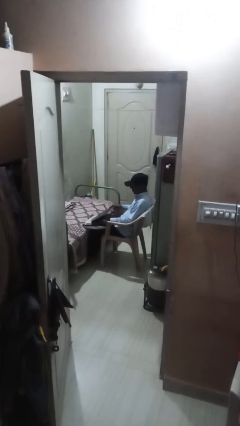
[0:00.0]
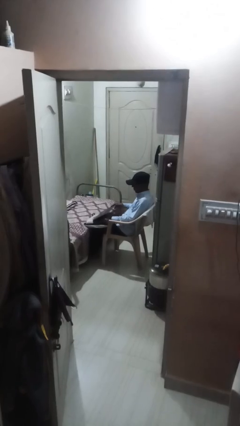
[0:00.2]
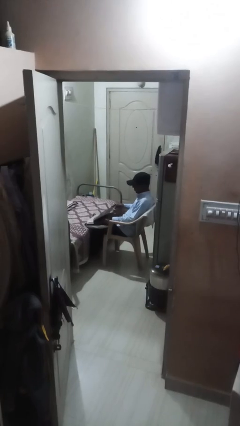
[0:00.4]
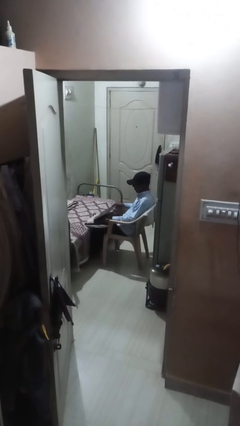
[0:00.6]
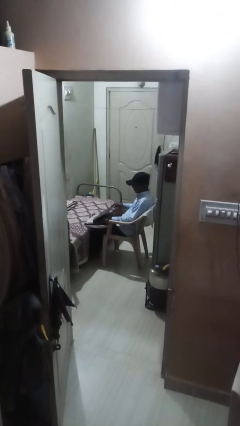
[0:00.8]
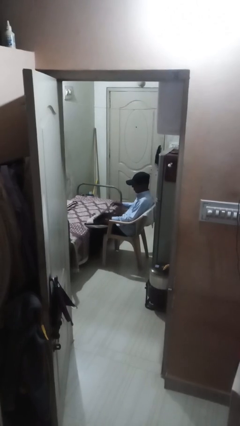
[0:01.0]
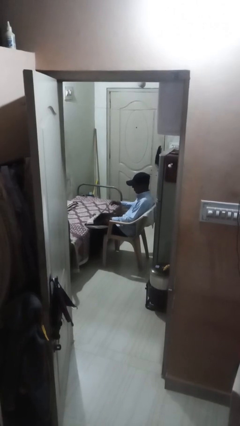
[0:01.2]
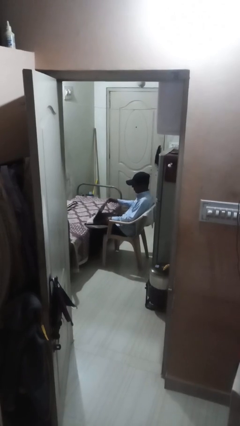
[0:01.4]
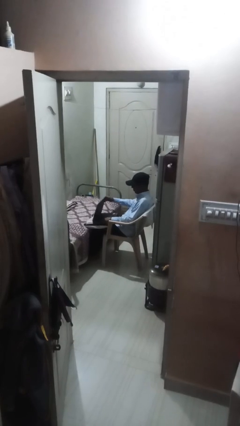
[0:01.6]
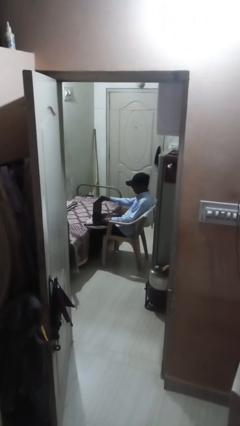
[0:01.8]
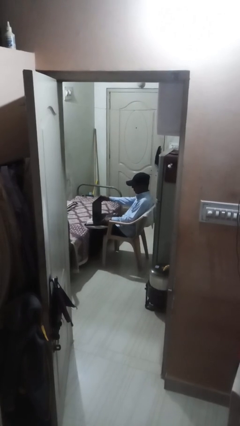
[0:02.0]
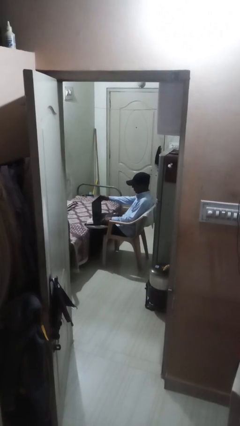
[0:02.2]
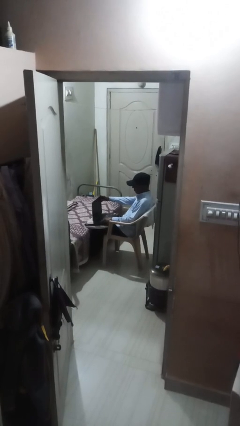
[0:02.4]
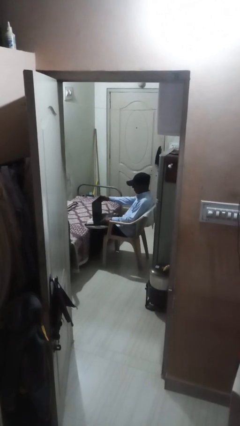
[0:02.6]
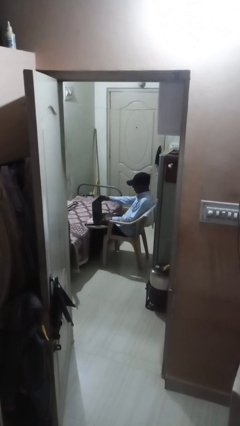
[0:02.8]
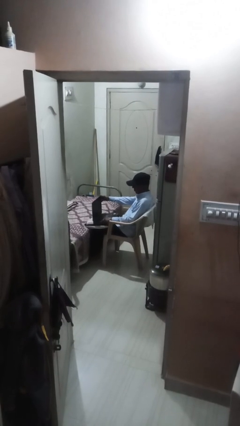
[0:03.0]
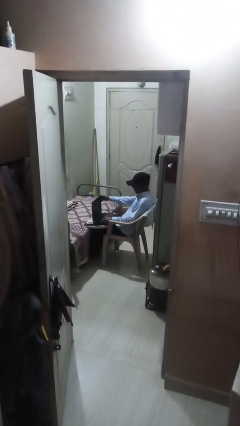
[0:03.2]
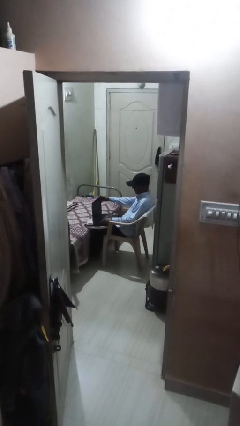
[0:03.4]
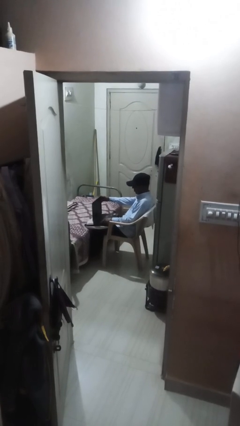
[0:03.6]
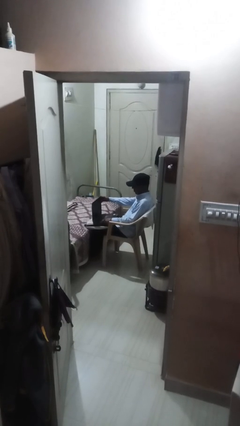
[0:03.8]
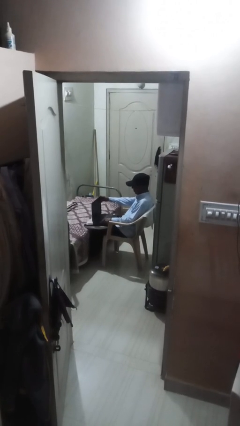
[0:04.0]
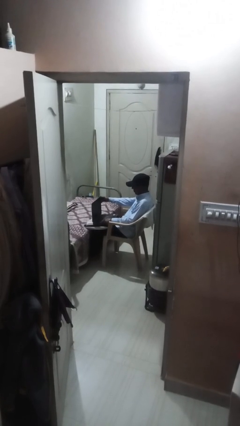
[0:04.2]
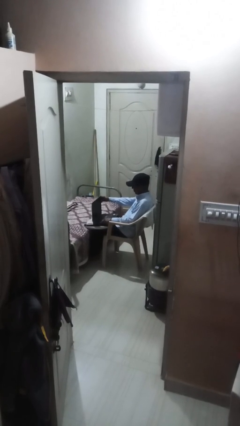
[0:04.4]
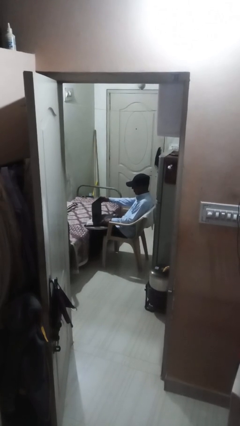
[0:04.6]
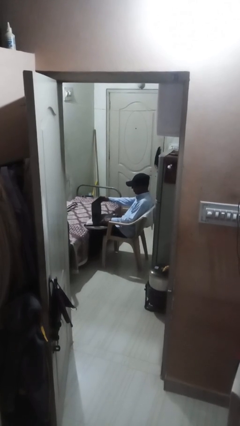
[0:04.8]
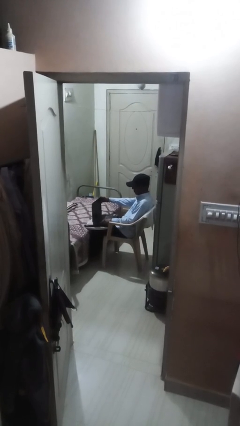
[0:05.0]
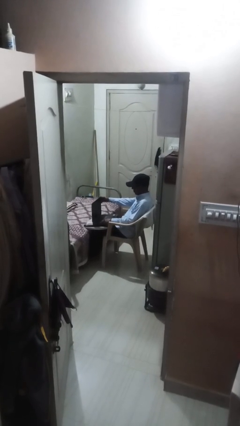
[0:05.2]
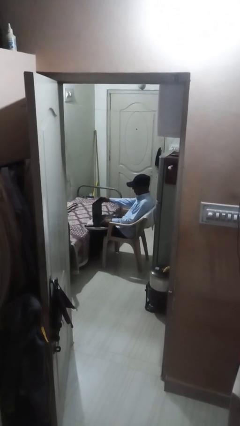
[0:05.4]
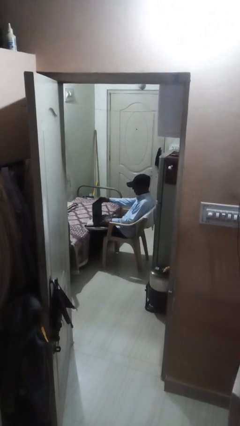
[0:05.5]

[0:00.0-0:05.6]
person interacts with laptop

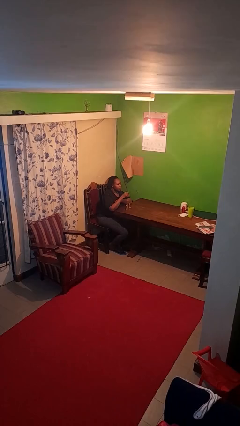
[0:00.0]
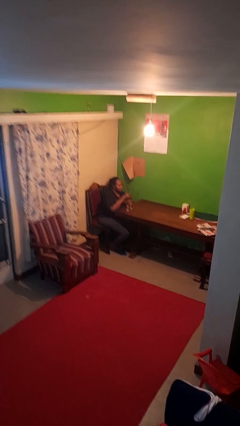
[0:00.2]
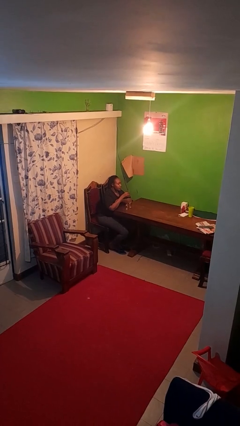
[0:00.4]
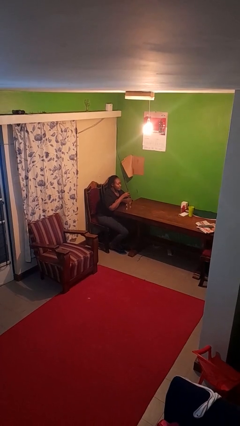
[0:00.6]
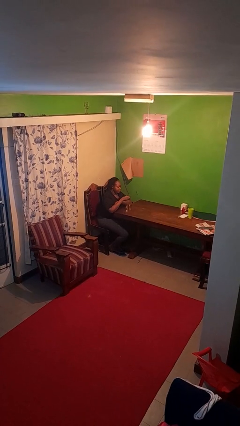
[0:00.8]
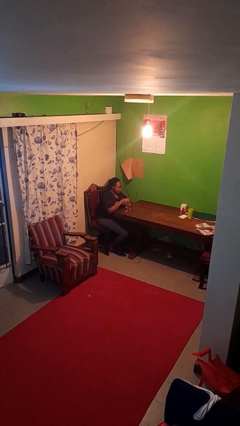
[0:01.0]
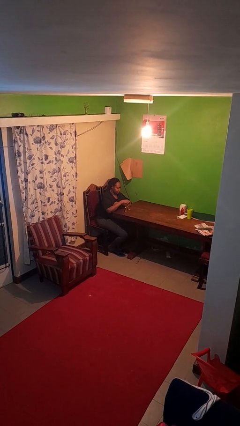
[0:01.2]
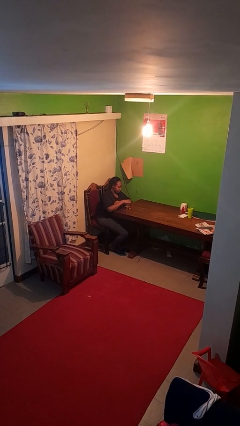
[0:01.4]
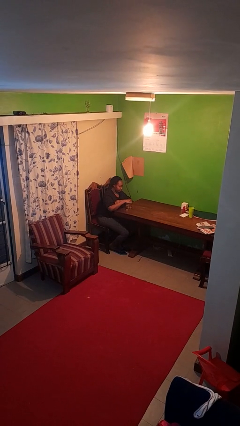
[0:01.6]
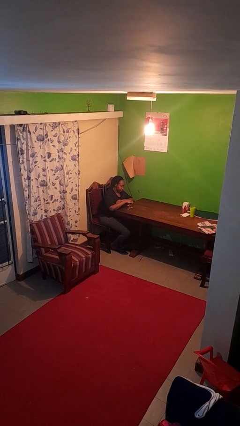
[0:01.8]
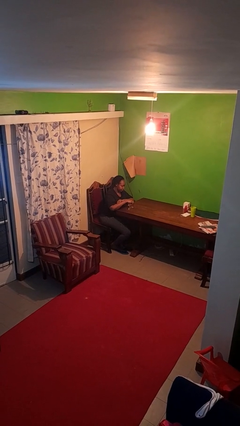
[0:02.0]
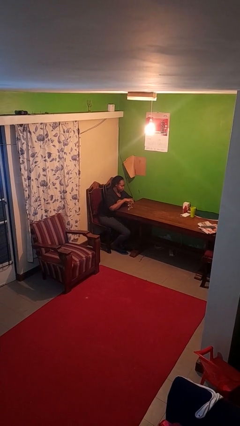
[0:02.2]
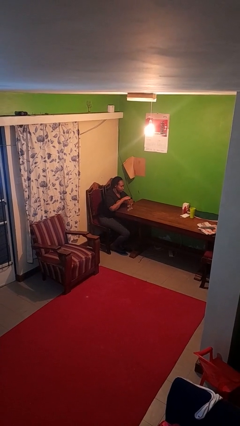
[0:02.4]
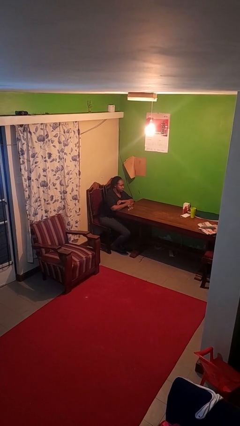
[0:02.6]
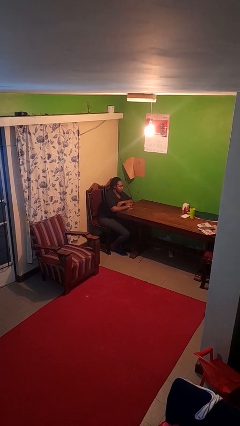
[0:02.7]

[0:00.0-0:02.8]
person puts down object on table

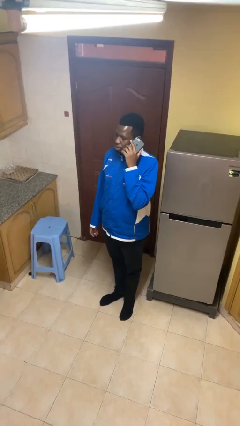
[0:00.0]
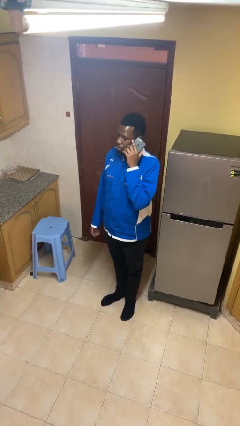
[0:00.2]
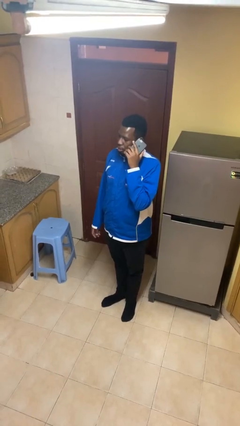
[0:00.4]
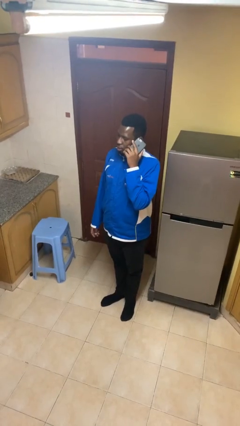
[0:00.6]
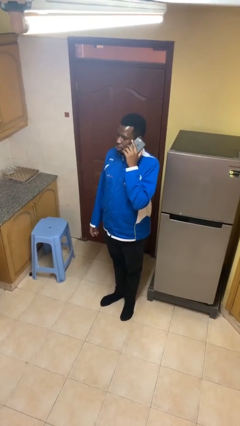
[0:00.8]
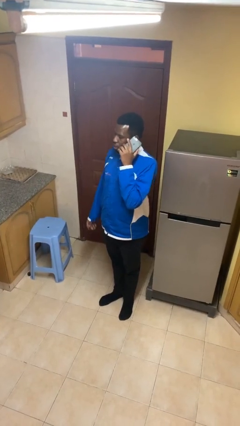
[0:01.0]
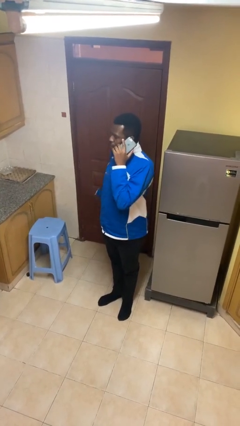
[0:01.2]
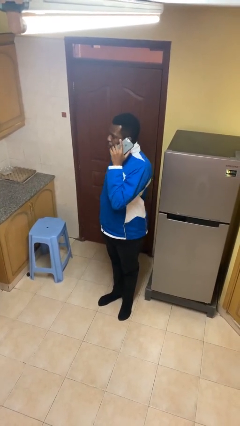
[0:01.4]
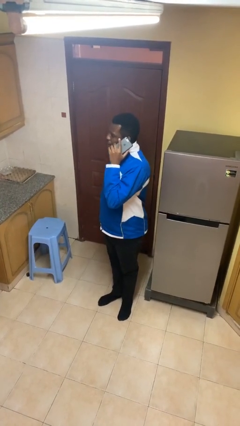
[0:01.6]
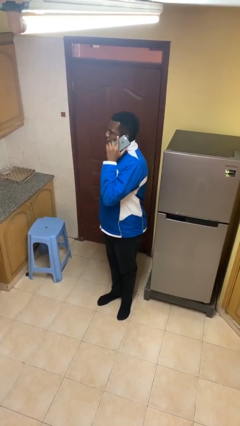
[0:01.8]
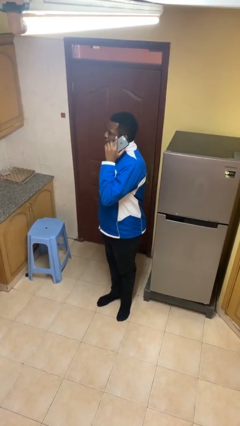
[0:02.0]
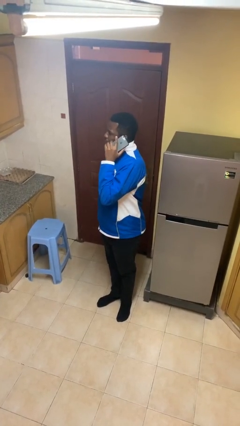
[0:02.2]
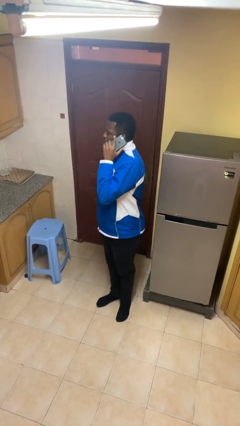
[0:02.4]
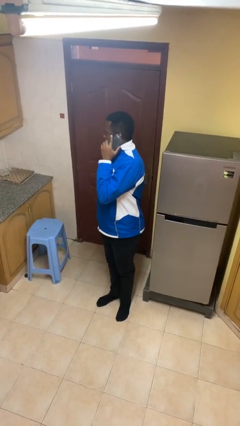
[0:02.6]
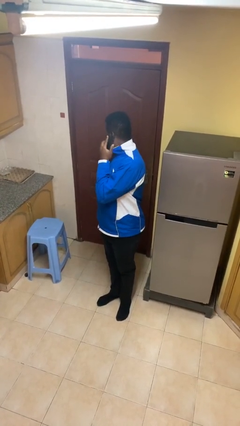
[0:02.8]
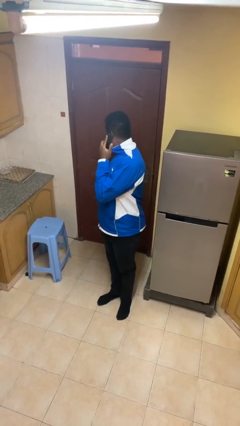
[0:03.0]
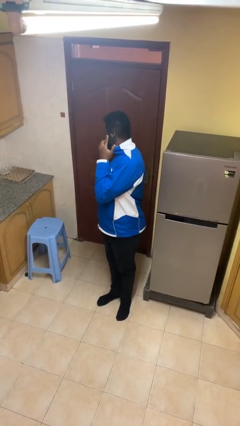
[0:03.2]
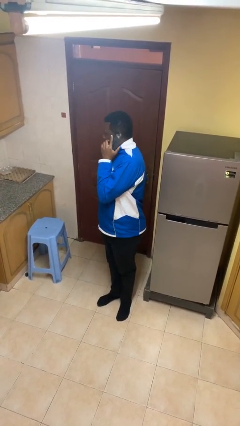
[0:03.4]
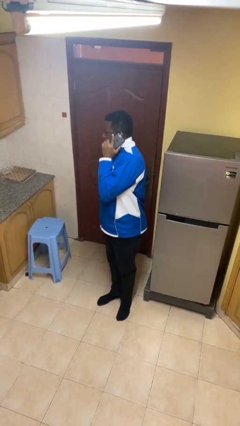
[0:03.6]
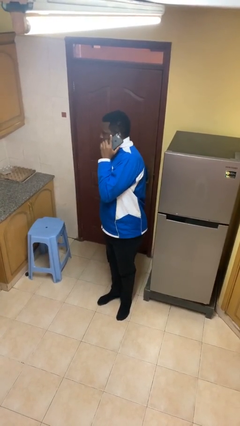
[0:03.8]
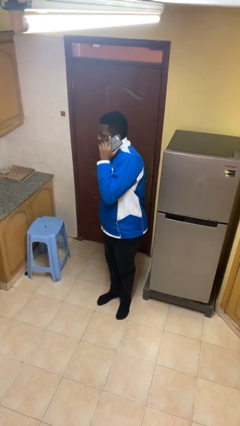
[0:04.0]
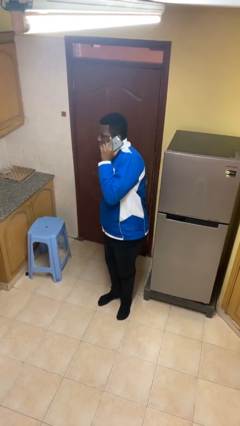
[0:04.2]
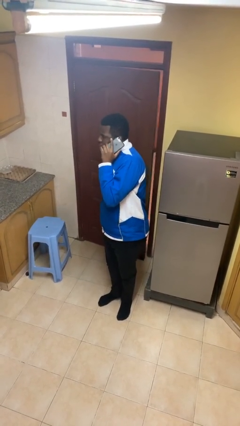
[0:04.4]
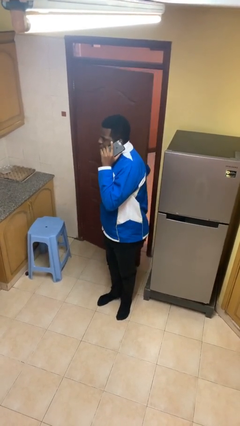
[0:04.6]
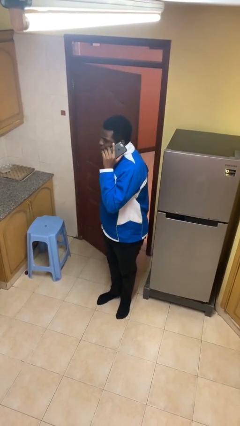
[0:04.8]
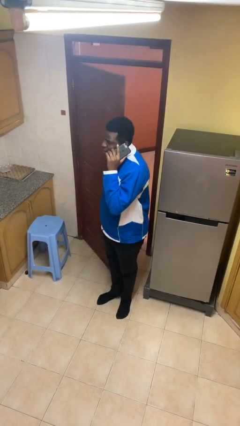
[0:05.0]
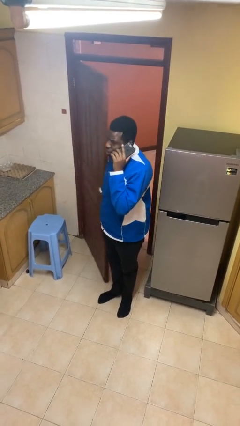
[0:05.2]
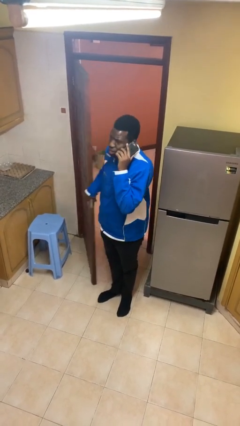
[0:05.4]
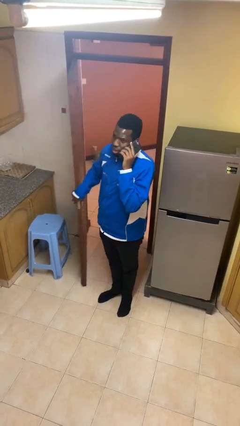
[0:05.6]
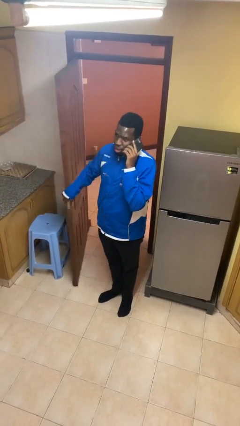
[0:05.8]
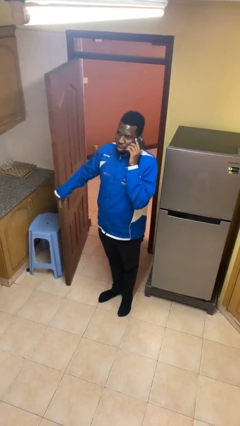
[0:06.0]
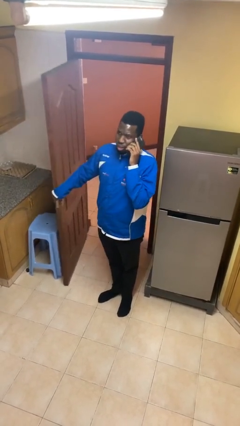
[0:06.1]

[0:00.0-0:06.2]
person opens facility door

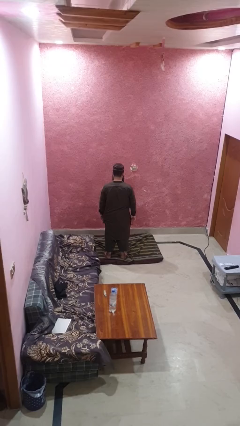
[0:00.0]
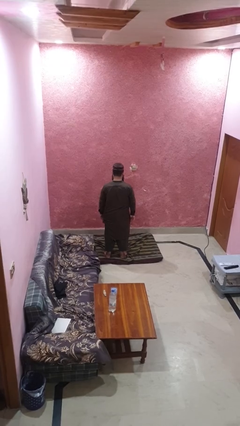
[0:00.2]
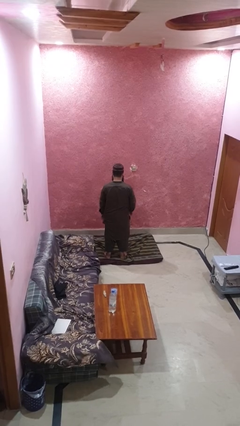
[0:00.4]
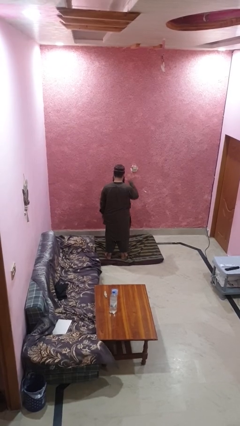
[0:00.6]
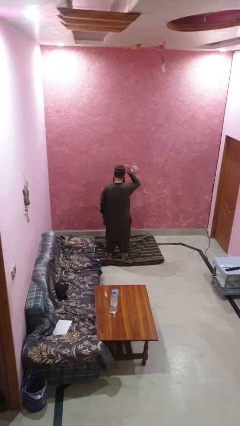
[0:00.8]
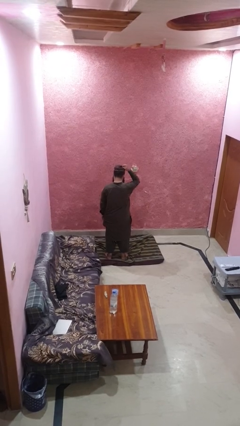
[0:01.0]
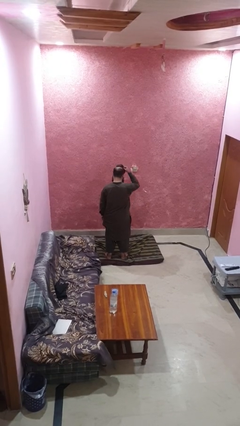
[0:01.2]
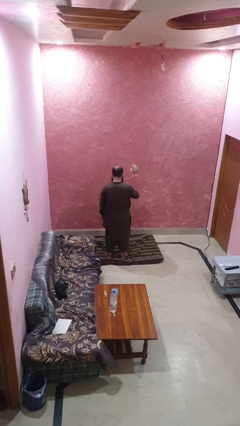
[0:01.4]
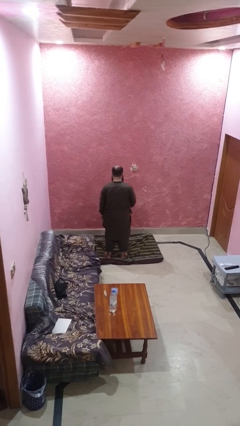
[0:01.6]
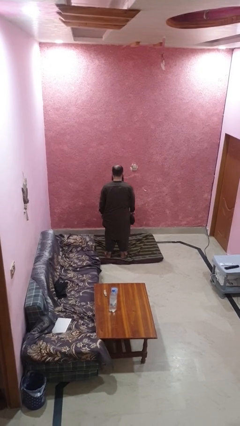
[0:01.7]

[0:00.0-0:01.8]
person takes off hat

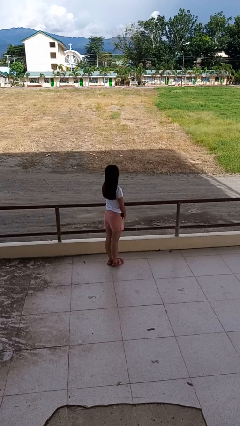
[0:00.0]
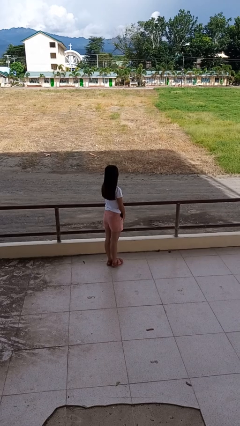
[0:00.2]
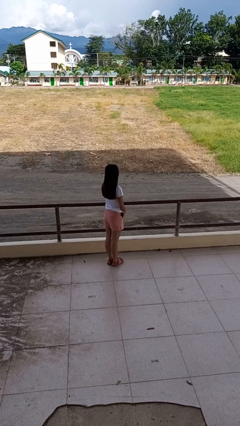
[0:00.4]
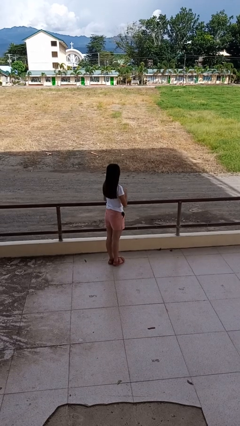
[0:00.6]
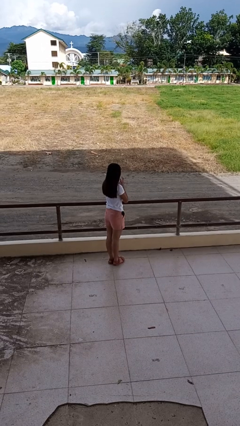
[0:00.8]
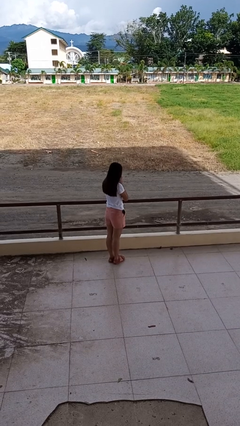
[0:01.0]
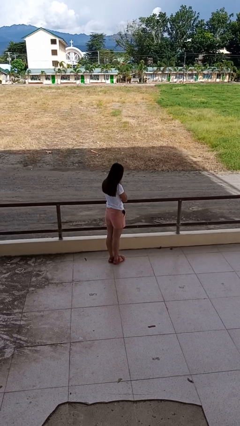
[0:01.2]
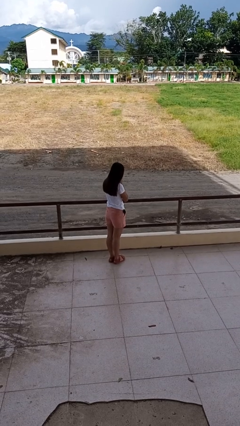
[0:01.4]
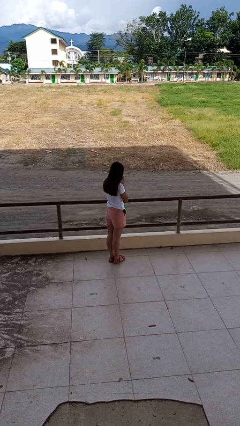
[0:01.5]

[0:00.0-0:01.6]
person sneezes into hand
